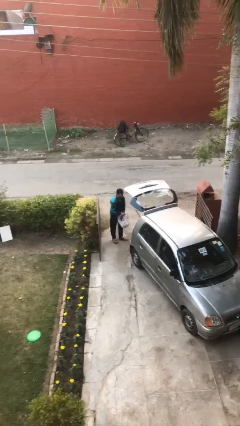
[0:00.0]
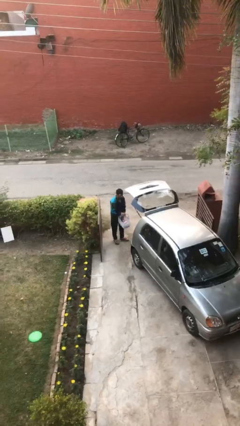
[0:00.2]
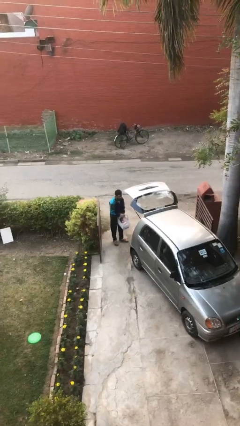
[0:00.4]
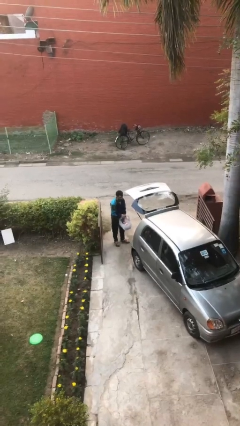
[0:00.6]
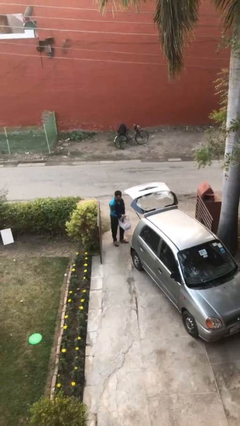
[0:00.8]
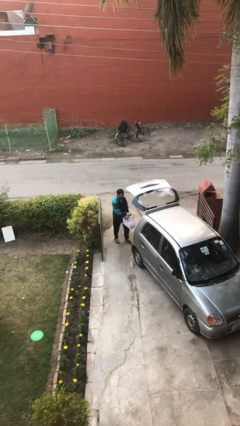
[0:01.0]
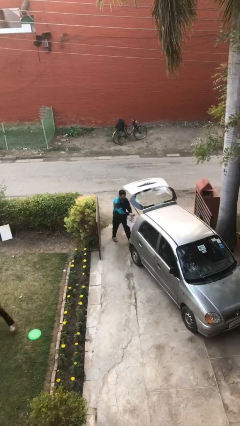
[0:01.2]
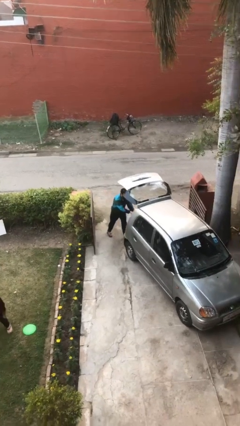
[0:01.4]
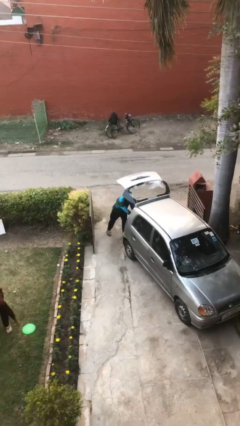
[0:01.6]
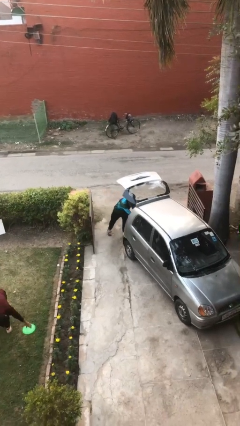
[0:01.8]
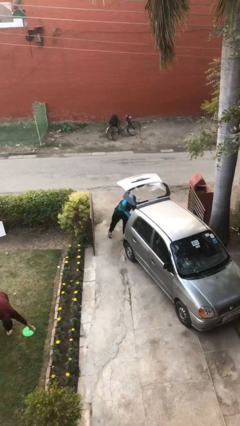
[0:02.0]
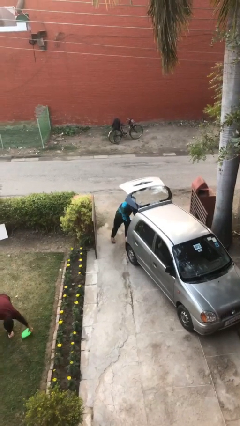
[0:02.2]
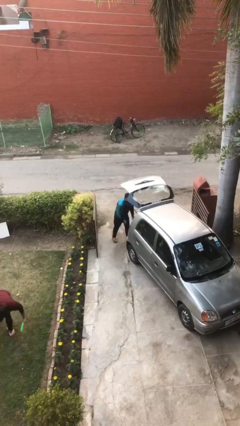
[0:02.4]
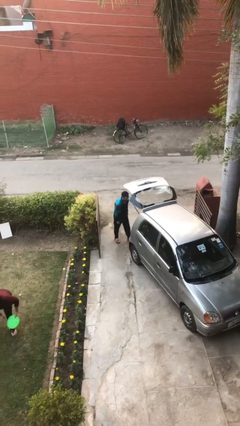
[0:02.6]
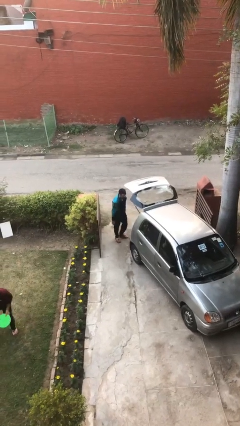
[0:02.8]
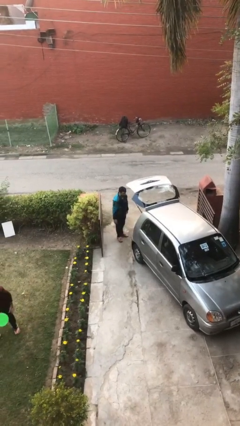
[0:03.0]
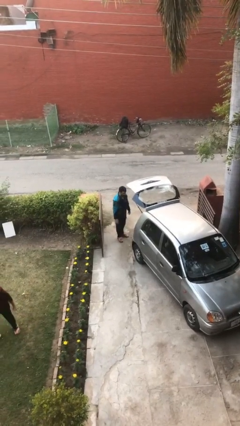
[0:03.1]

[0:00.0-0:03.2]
person loads car

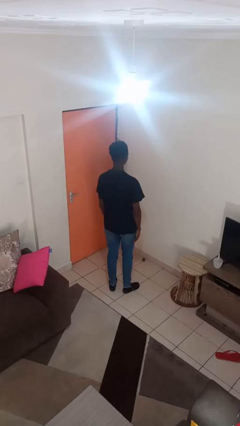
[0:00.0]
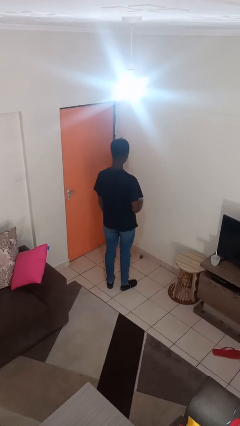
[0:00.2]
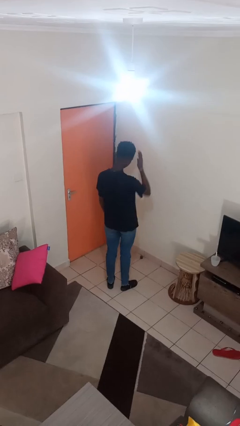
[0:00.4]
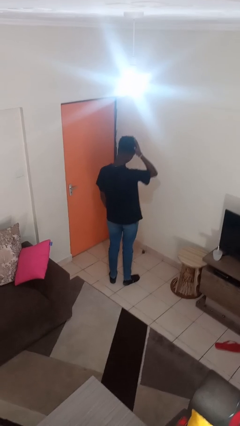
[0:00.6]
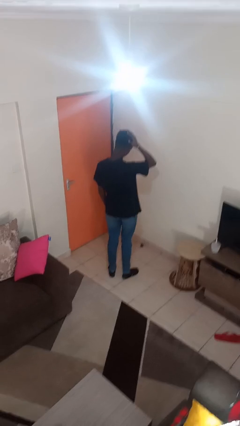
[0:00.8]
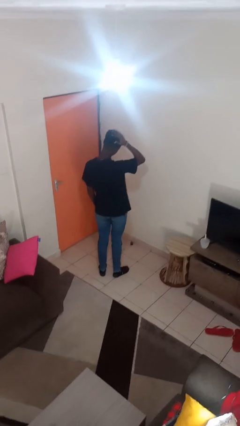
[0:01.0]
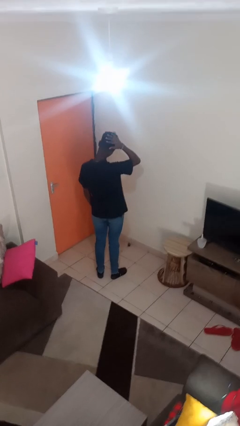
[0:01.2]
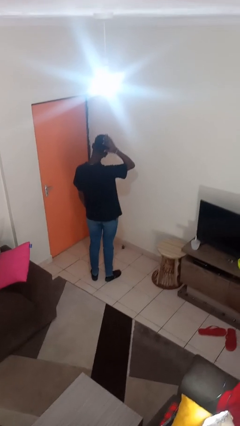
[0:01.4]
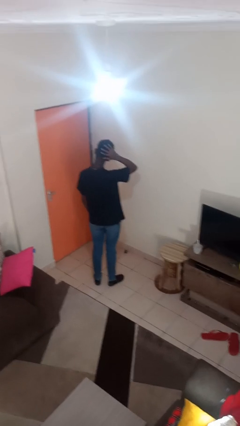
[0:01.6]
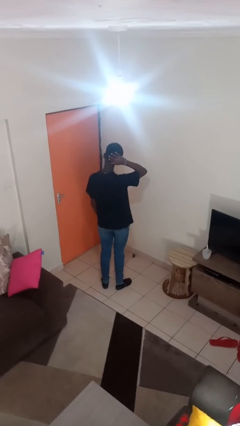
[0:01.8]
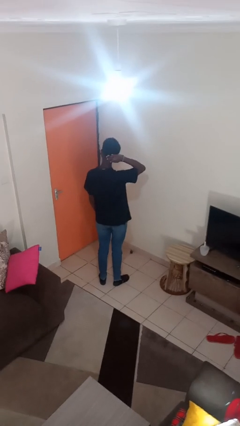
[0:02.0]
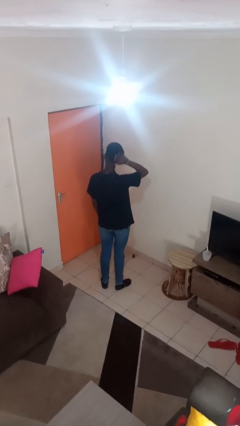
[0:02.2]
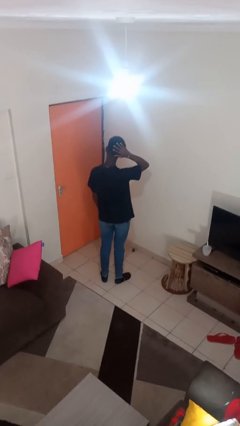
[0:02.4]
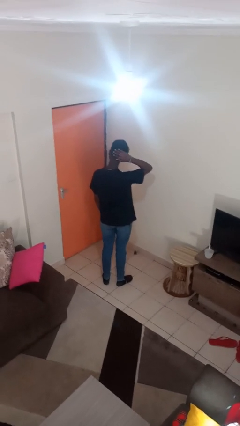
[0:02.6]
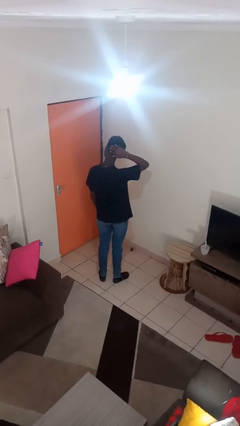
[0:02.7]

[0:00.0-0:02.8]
person strokes hair

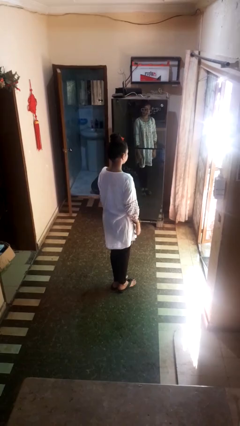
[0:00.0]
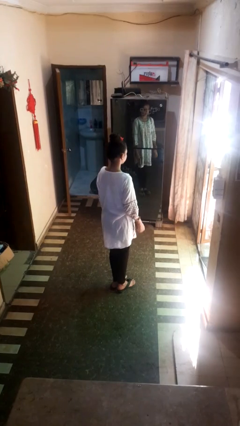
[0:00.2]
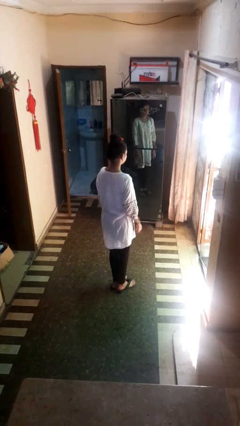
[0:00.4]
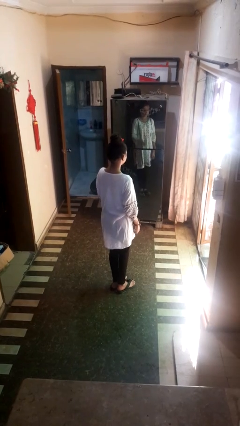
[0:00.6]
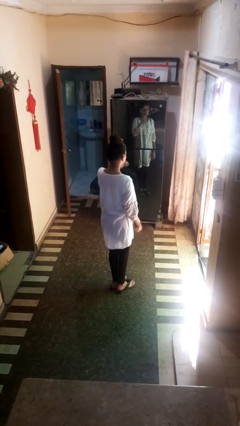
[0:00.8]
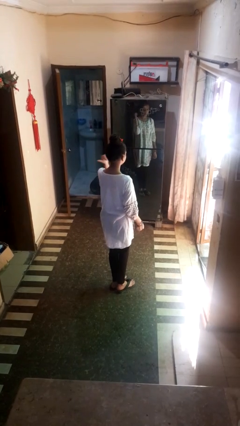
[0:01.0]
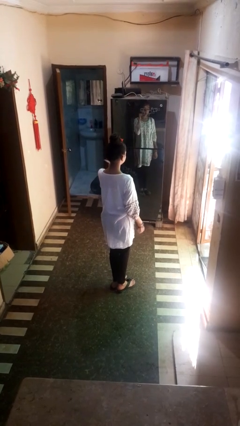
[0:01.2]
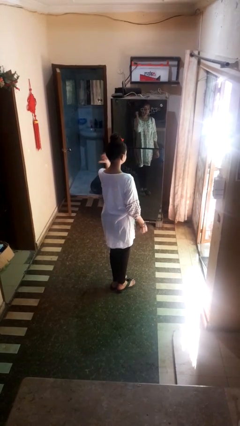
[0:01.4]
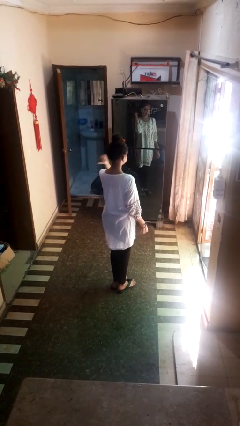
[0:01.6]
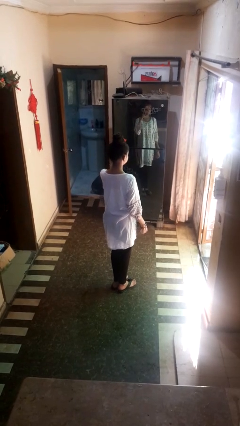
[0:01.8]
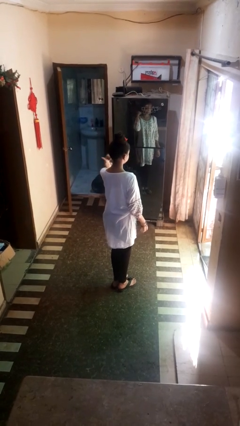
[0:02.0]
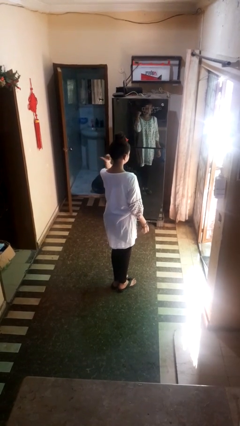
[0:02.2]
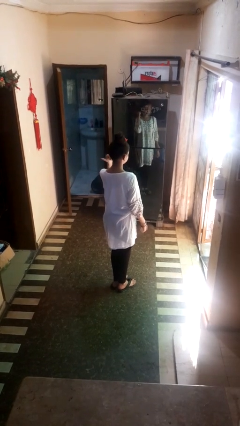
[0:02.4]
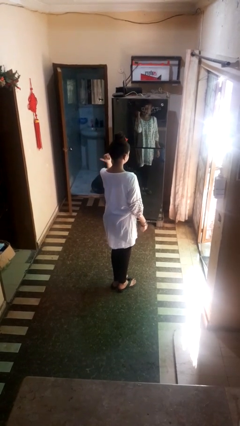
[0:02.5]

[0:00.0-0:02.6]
person gestures behind me

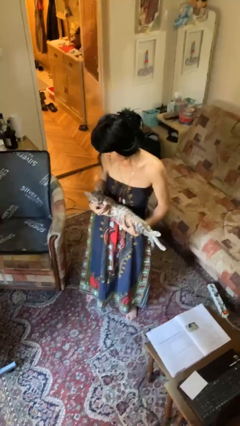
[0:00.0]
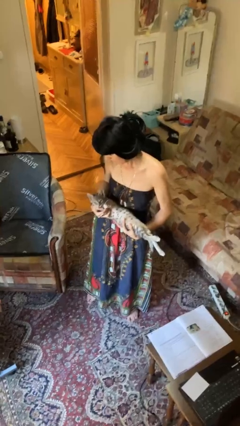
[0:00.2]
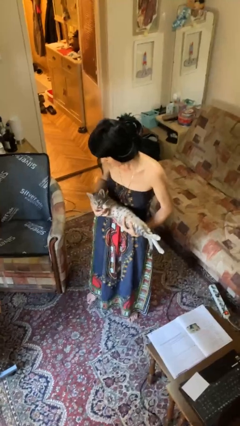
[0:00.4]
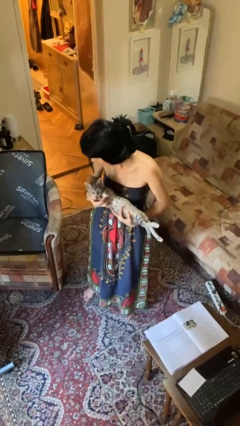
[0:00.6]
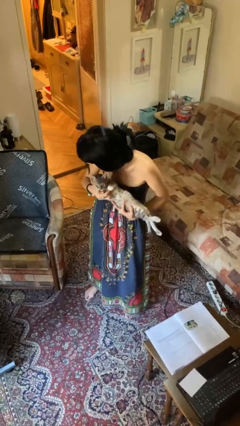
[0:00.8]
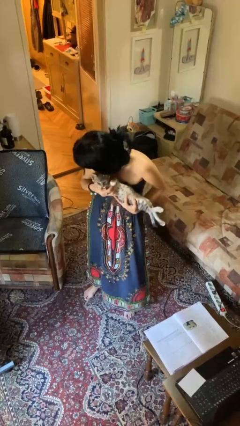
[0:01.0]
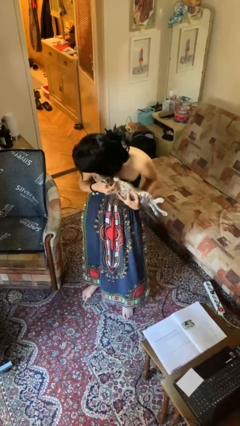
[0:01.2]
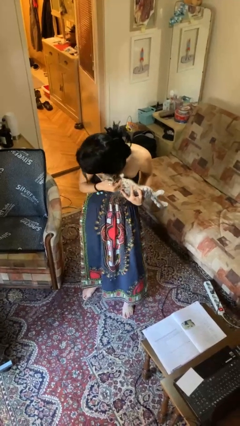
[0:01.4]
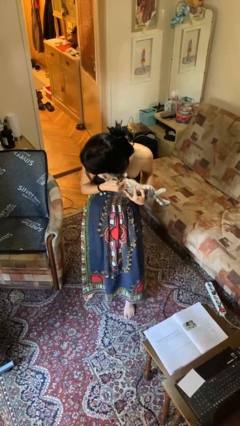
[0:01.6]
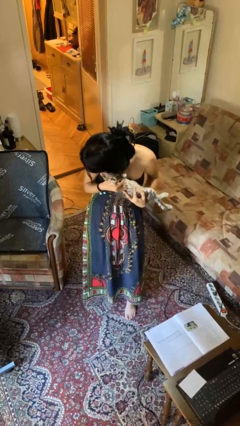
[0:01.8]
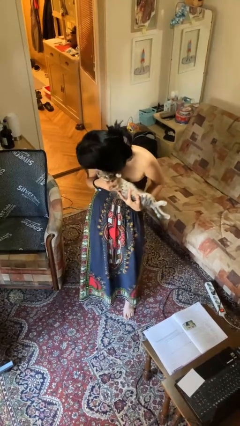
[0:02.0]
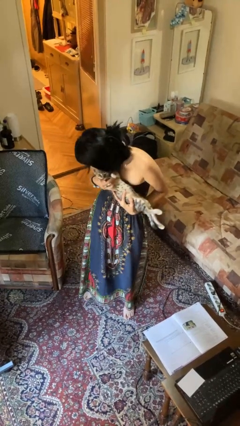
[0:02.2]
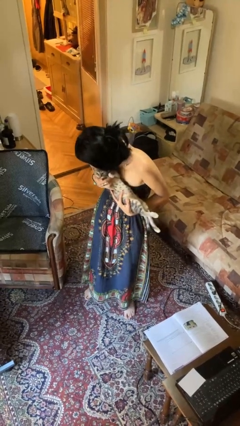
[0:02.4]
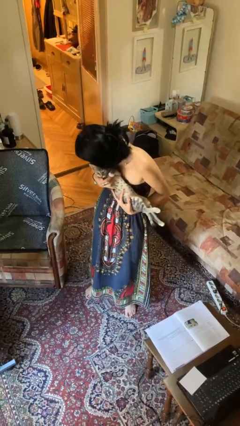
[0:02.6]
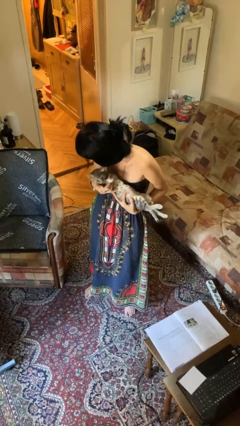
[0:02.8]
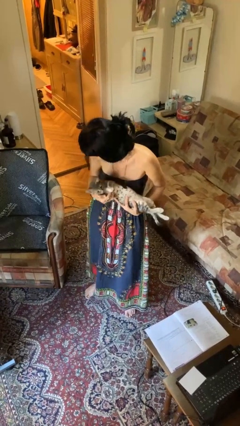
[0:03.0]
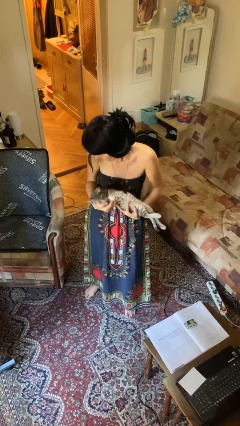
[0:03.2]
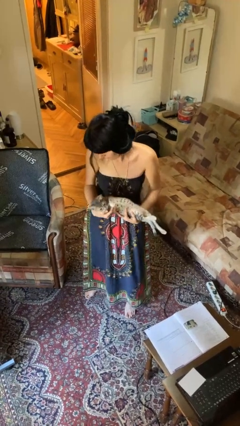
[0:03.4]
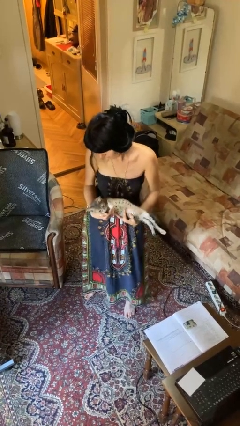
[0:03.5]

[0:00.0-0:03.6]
person hugs cat

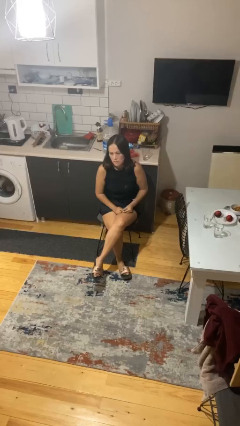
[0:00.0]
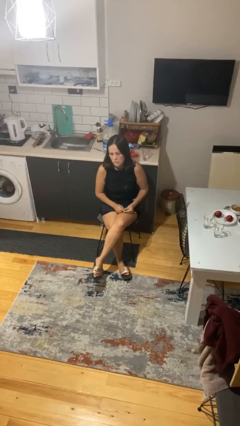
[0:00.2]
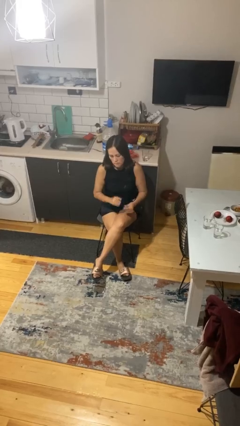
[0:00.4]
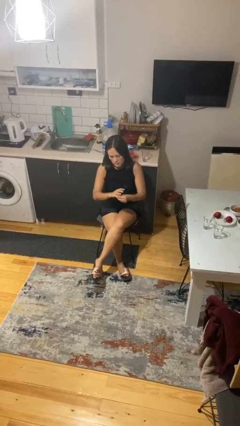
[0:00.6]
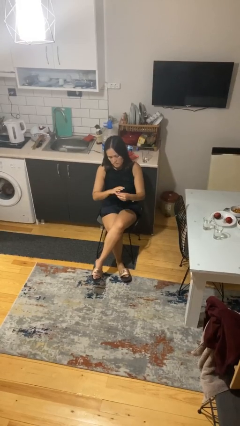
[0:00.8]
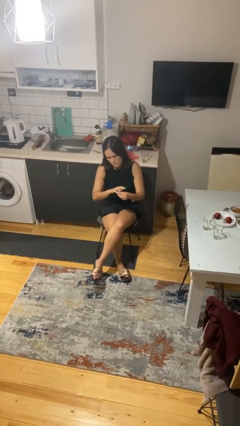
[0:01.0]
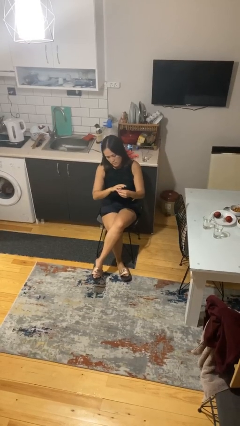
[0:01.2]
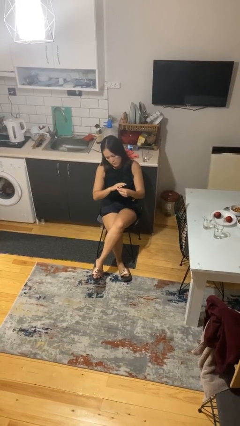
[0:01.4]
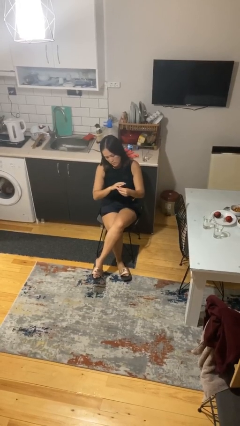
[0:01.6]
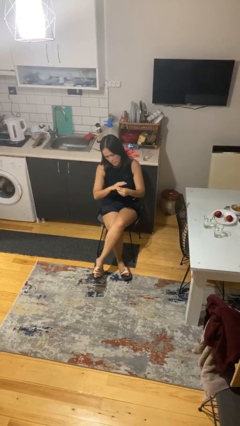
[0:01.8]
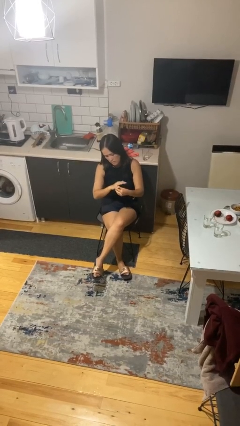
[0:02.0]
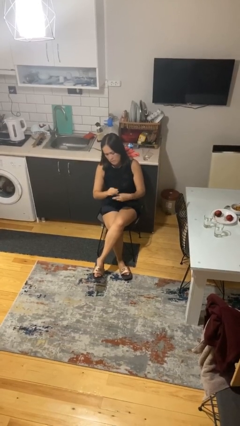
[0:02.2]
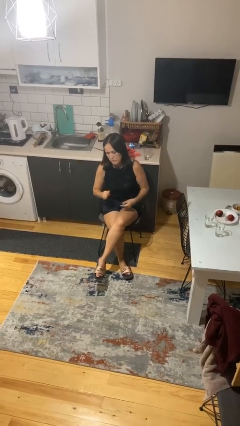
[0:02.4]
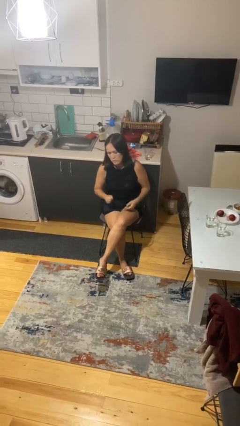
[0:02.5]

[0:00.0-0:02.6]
person puts on ring

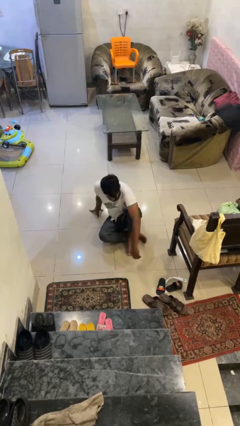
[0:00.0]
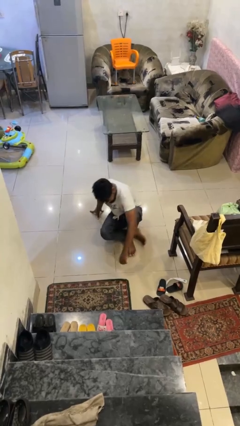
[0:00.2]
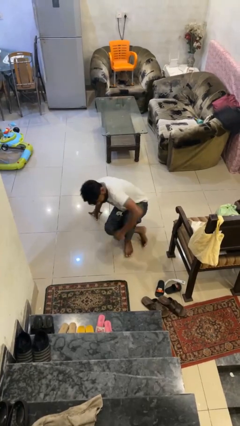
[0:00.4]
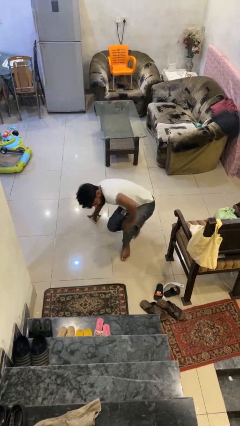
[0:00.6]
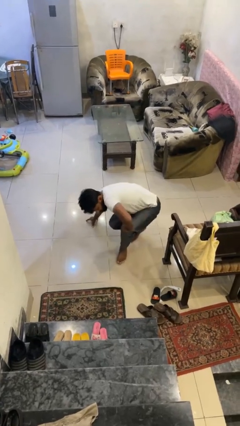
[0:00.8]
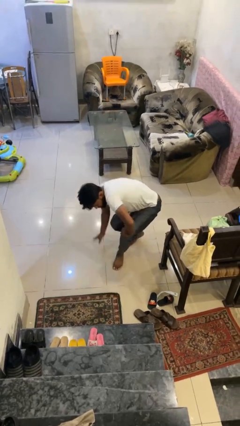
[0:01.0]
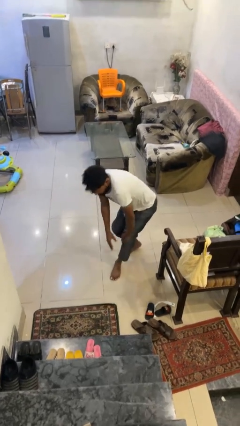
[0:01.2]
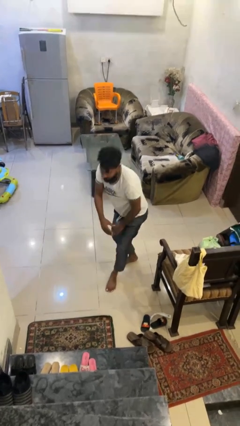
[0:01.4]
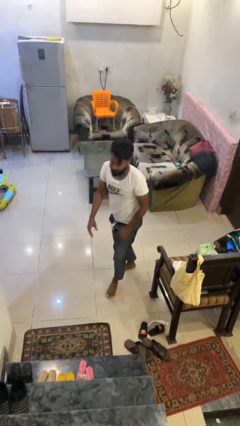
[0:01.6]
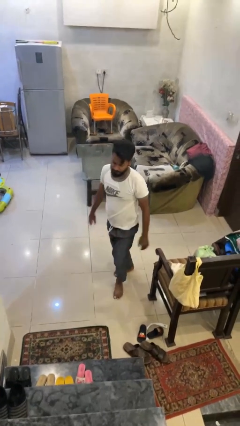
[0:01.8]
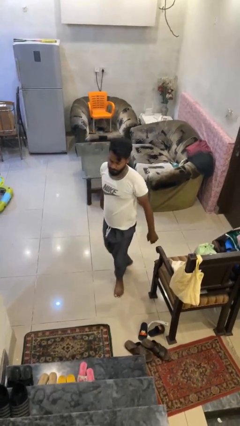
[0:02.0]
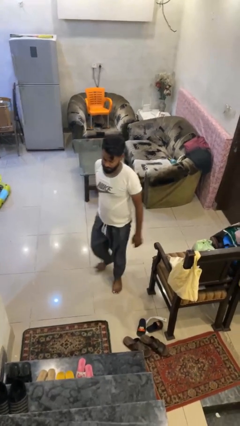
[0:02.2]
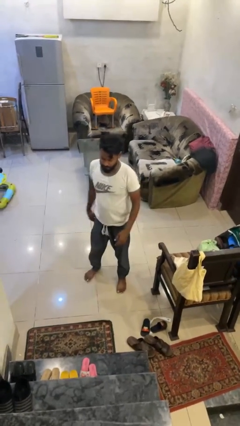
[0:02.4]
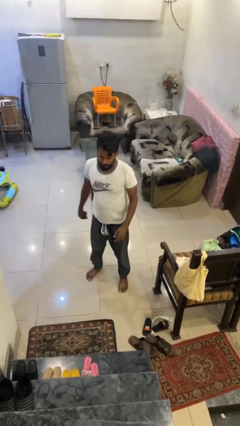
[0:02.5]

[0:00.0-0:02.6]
person stands up from floor

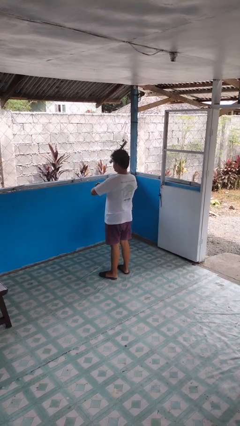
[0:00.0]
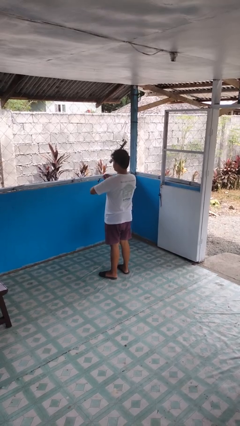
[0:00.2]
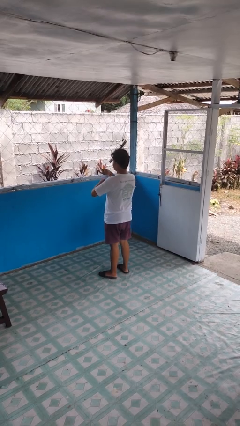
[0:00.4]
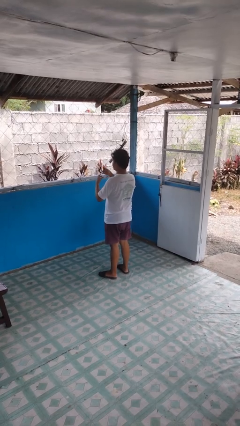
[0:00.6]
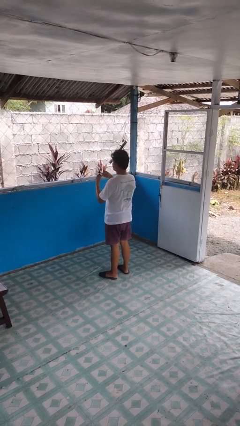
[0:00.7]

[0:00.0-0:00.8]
person takes off wristwatch
